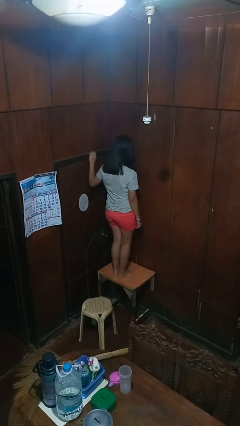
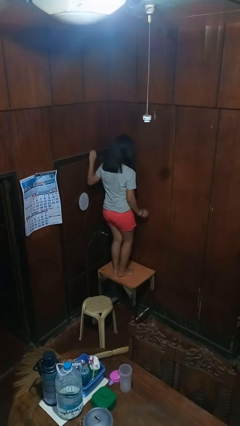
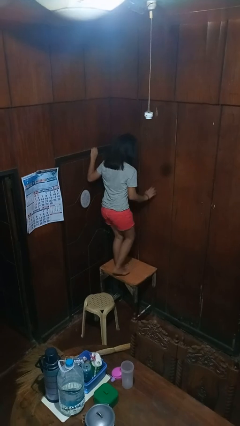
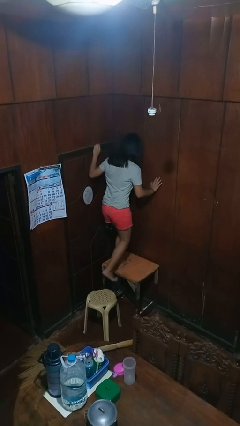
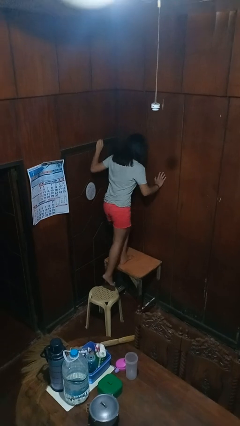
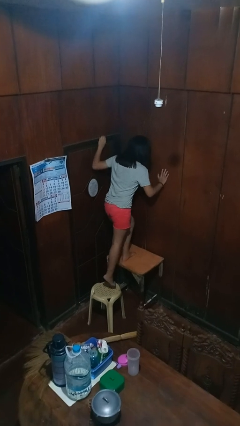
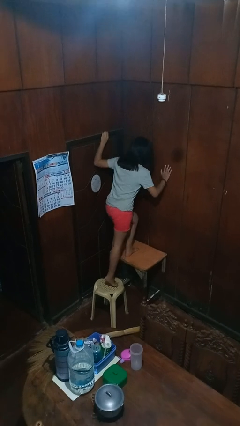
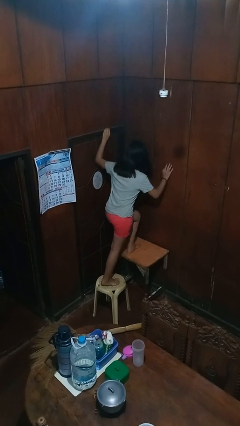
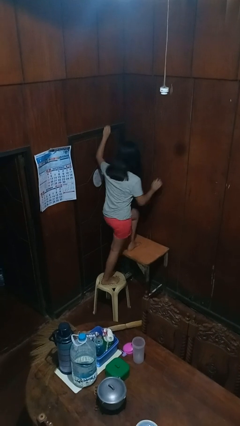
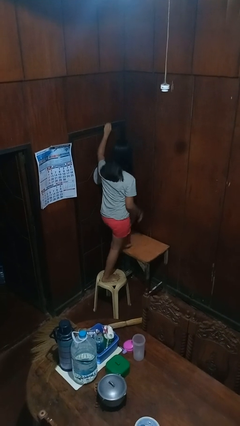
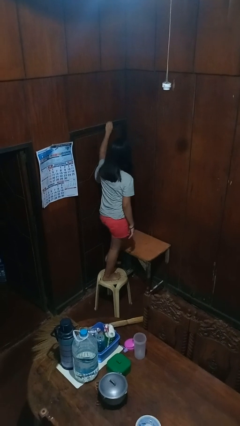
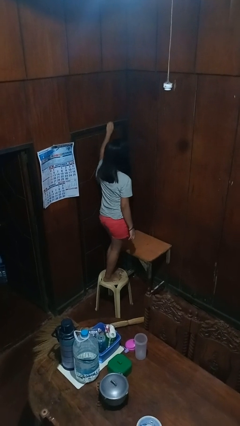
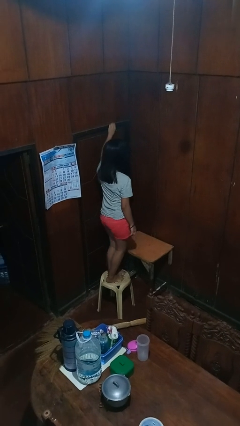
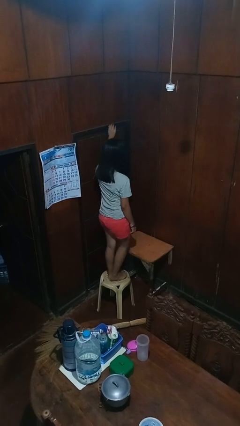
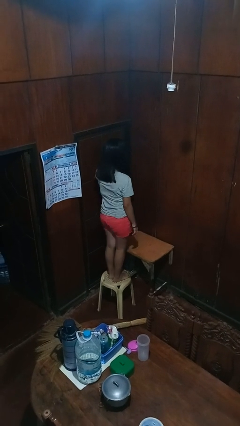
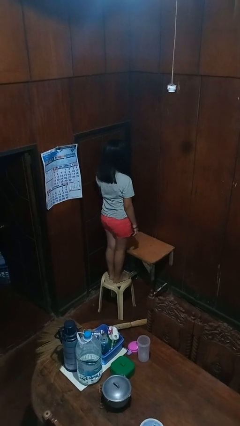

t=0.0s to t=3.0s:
person climbs off table

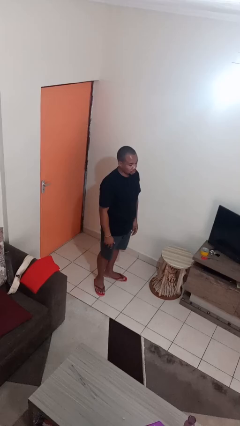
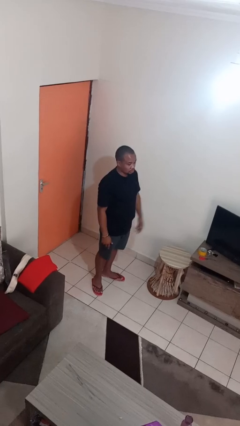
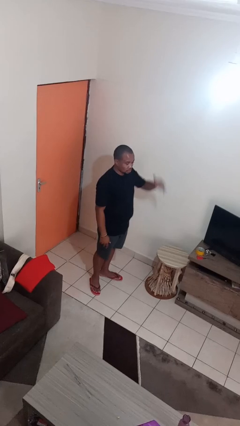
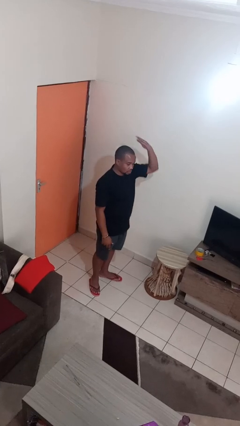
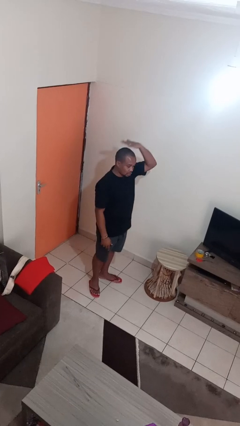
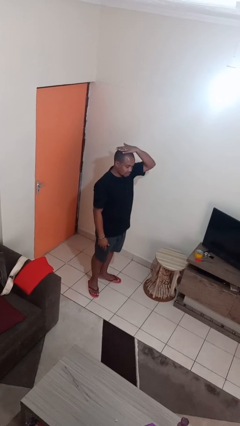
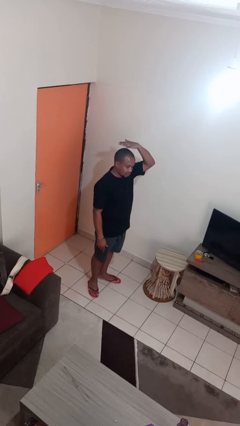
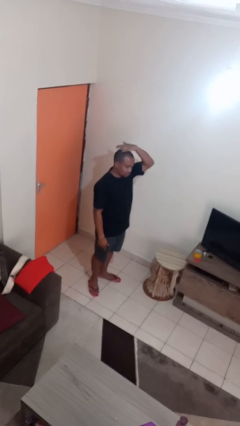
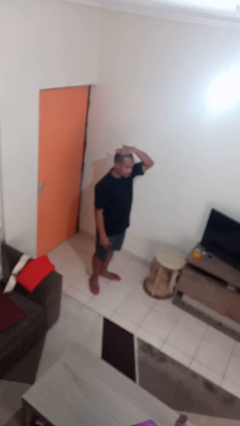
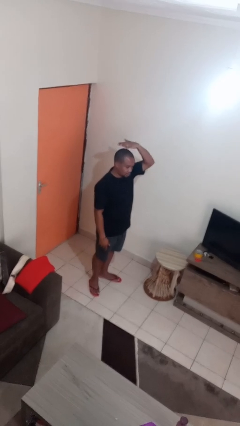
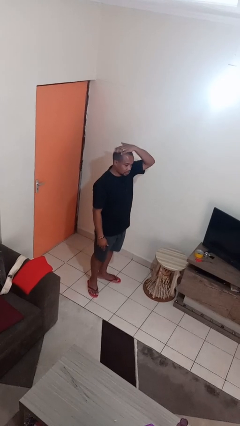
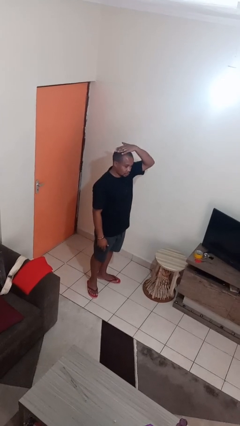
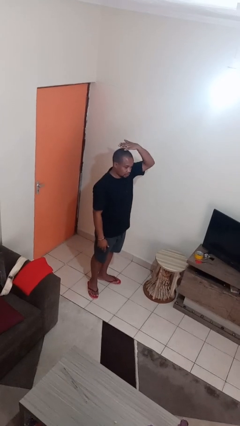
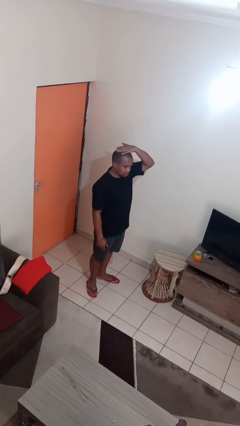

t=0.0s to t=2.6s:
person pats head

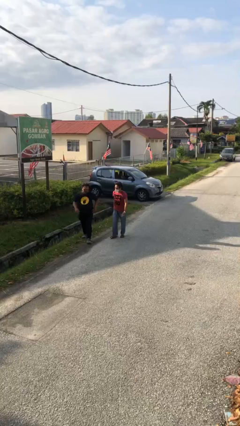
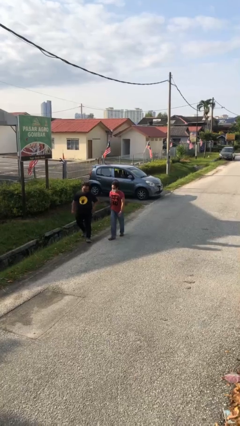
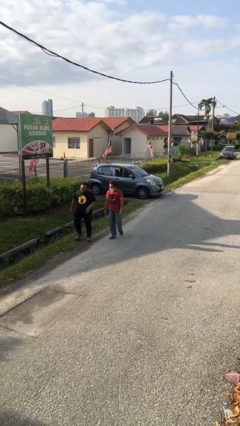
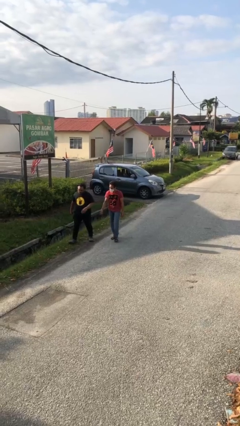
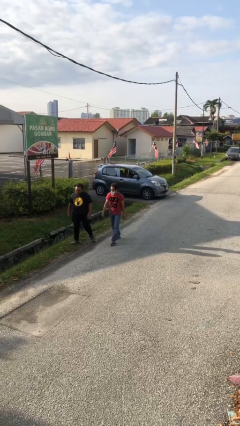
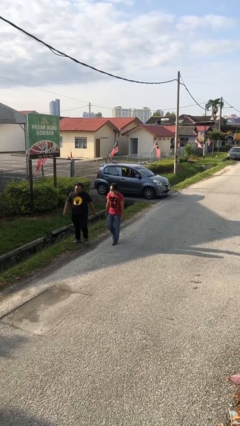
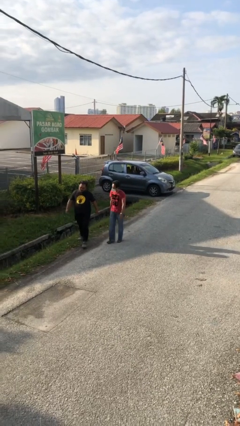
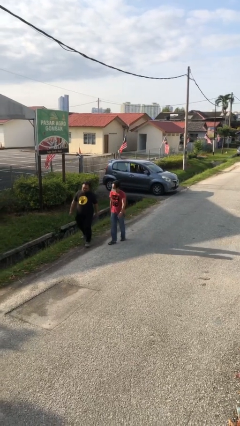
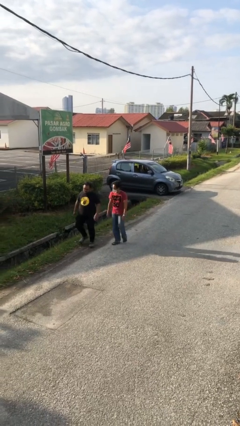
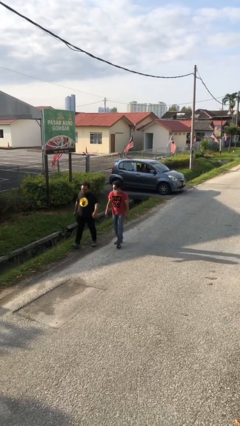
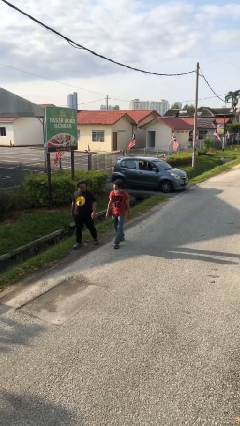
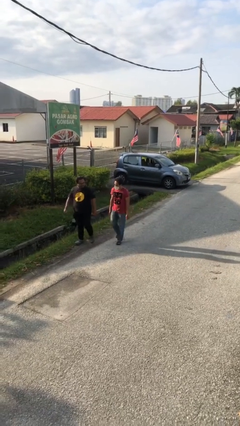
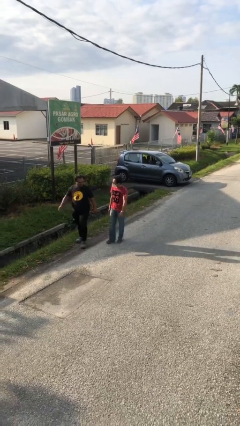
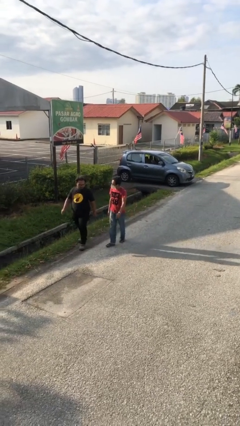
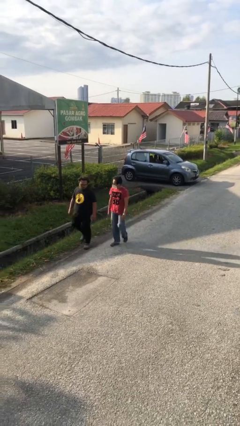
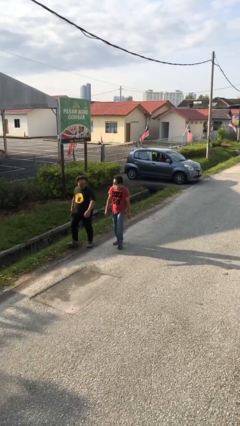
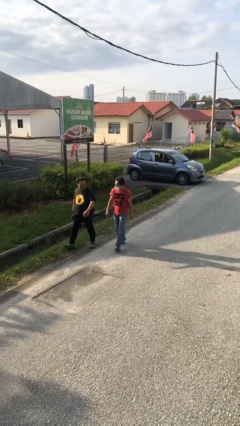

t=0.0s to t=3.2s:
person talks to person

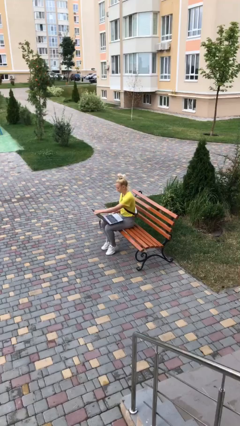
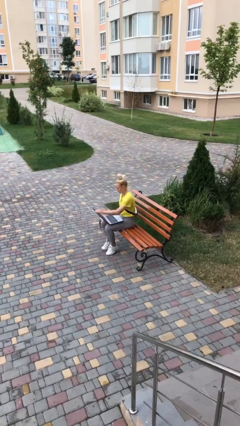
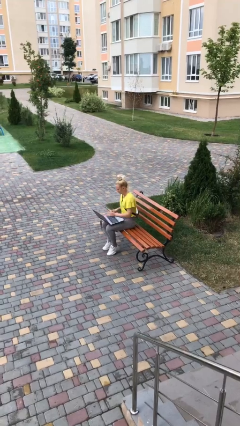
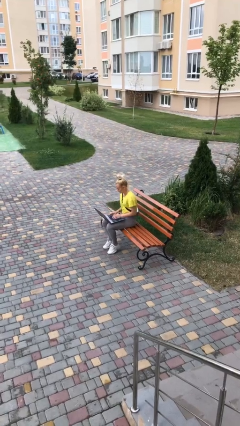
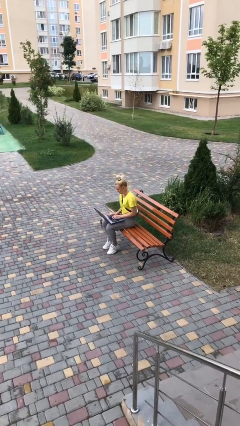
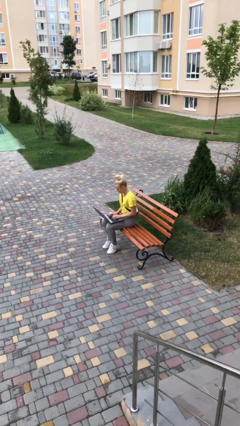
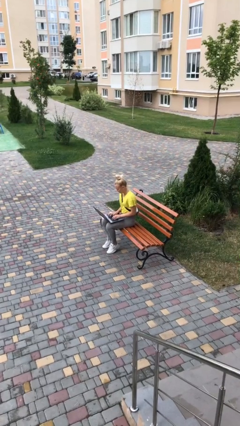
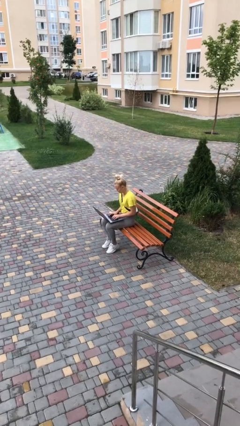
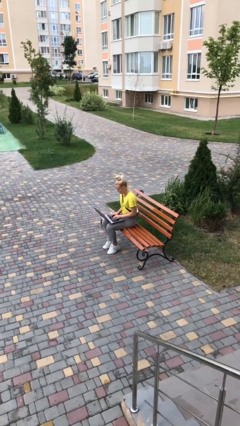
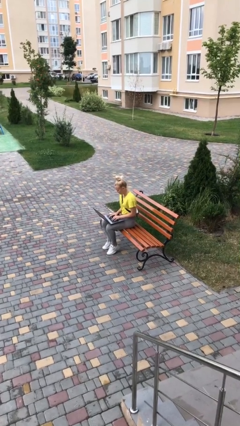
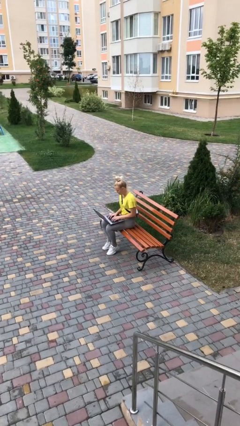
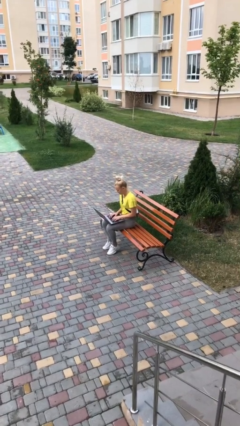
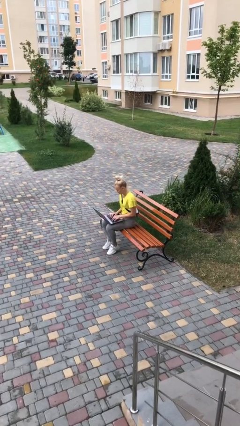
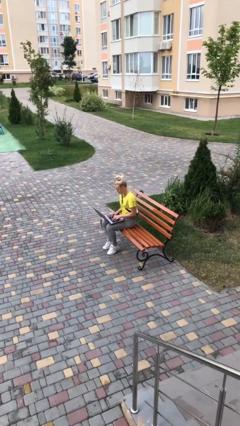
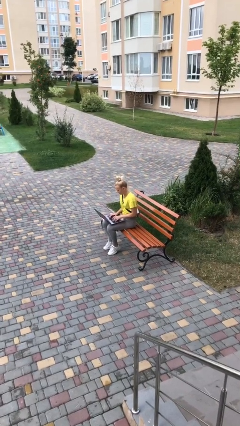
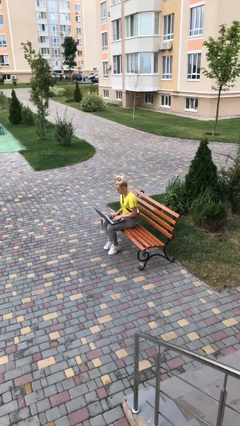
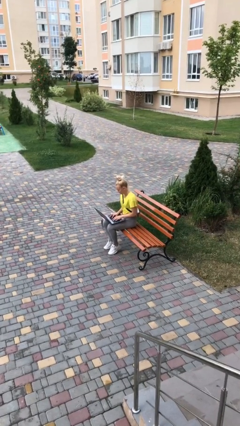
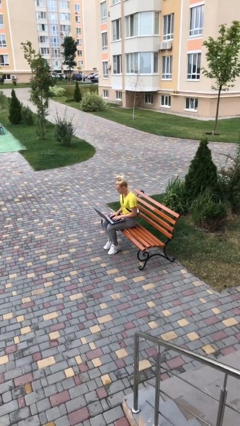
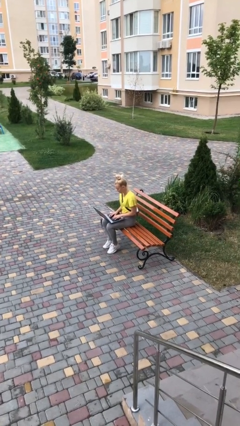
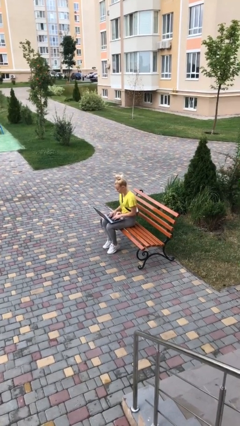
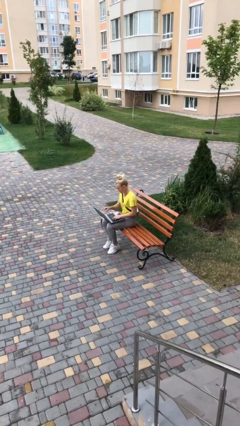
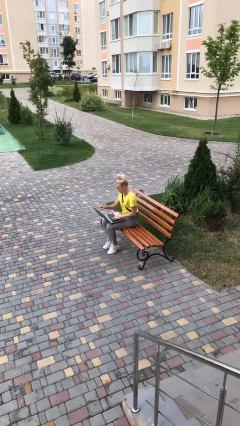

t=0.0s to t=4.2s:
person interacts with laptop

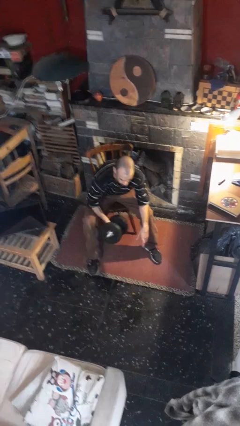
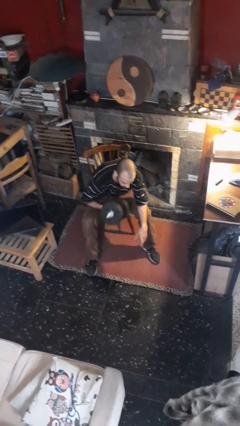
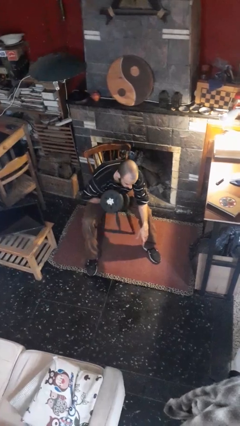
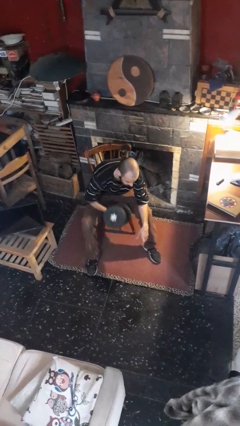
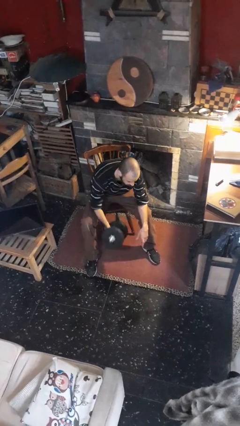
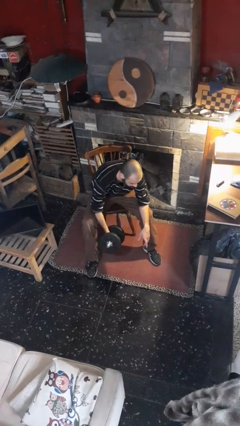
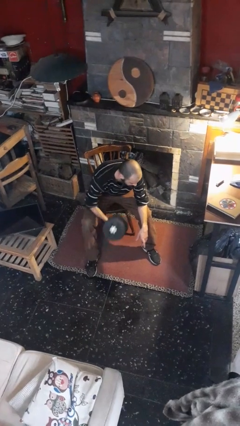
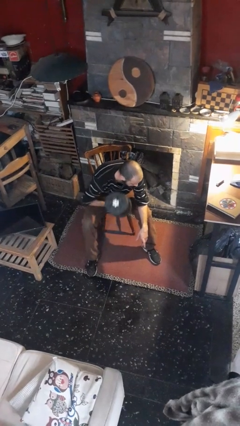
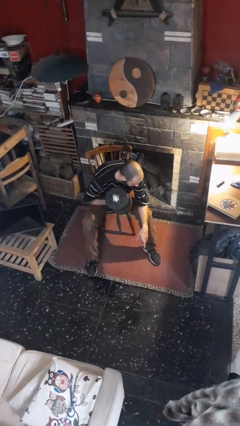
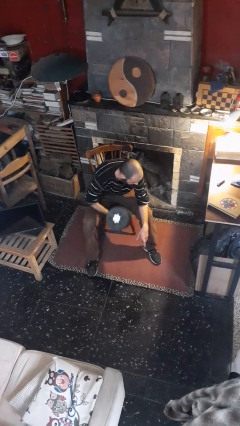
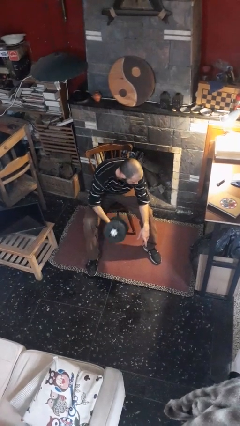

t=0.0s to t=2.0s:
person lifts dumbbells

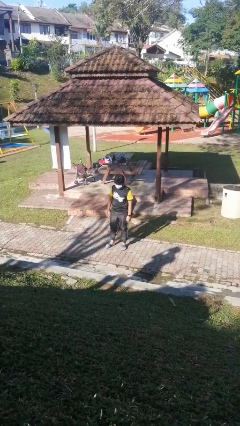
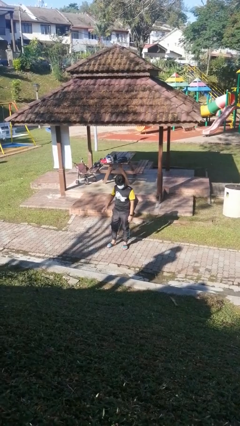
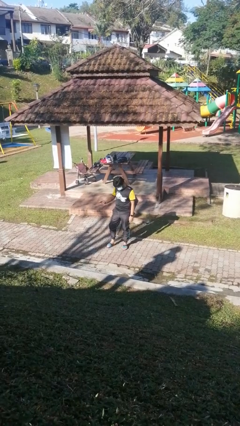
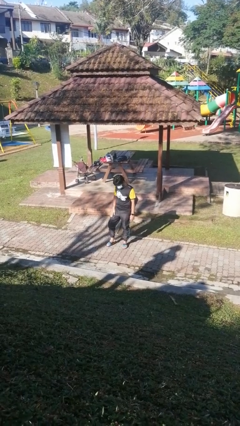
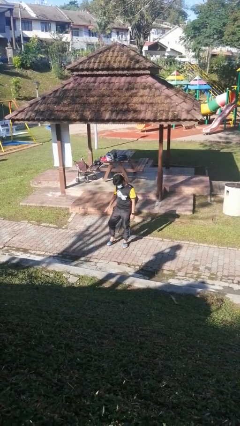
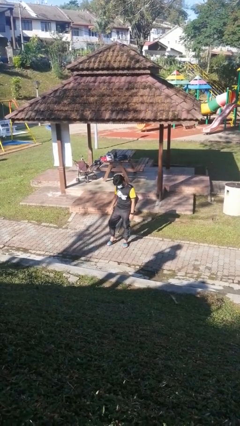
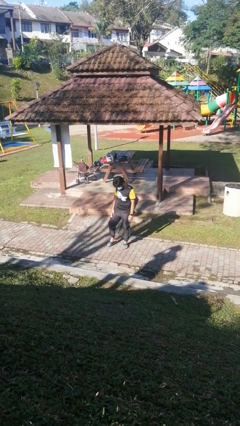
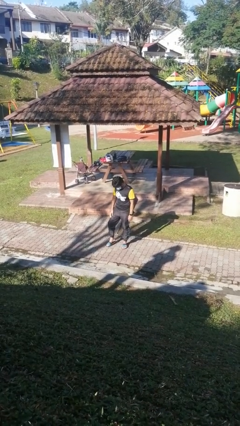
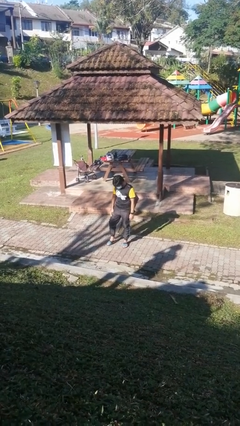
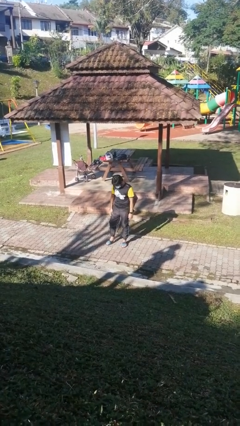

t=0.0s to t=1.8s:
person slaps hands on thighs

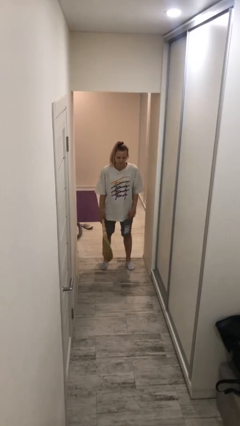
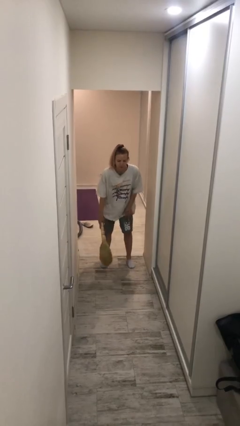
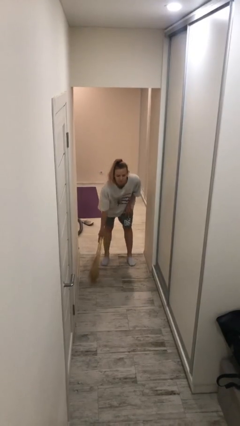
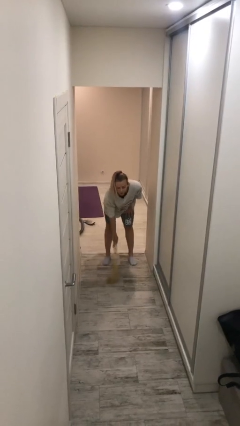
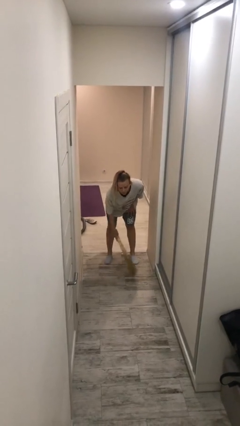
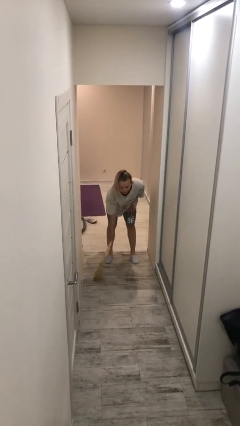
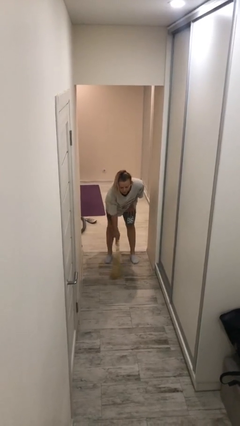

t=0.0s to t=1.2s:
person sweeps floor
